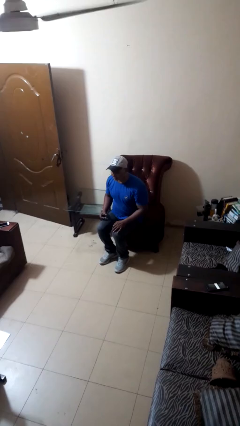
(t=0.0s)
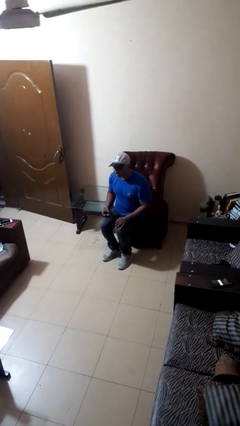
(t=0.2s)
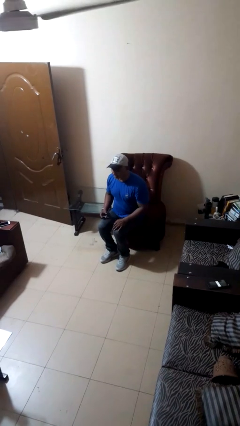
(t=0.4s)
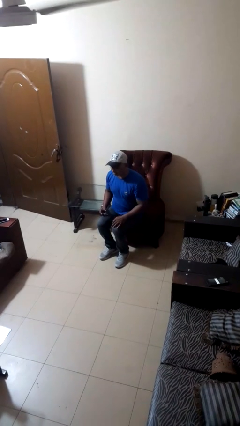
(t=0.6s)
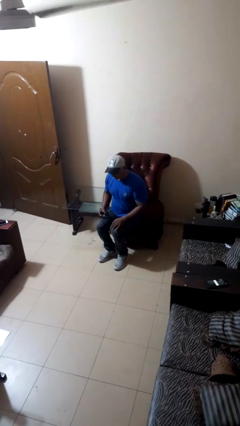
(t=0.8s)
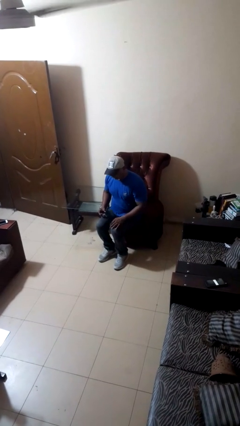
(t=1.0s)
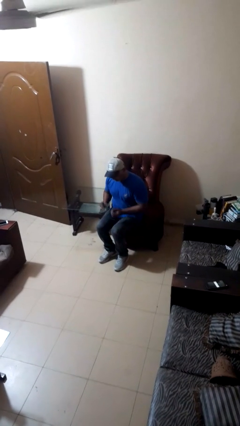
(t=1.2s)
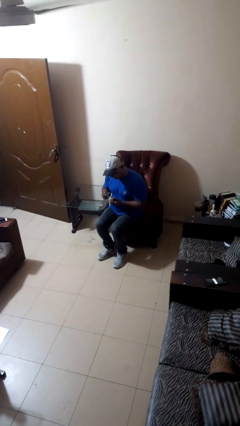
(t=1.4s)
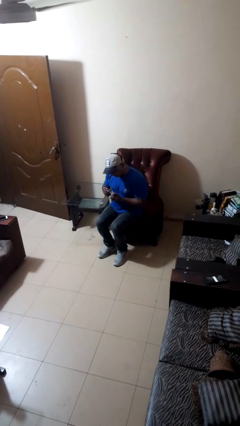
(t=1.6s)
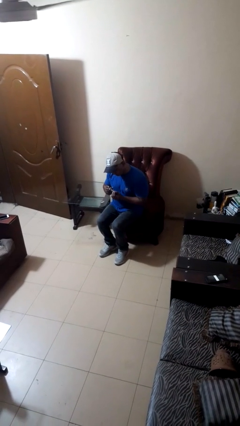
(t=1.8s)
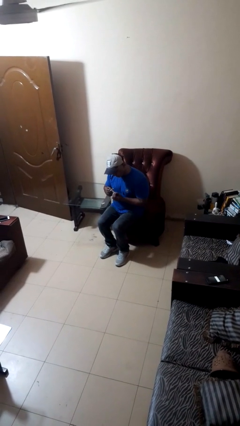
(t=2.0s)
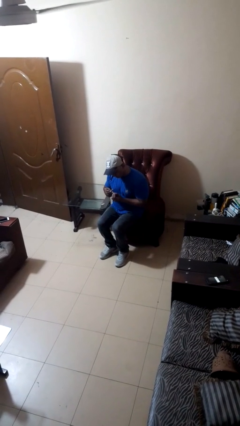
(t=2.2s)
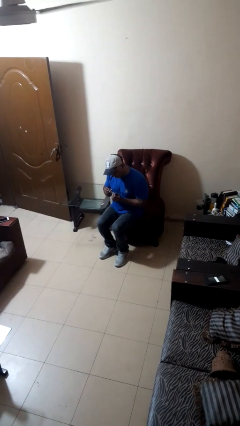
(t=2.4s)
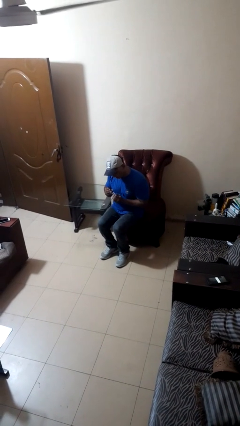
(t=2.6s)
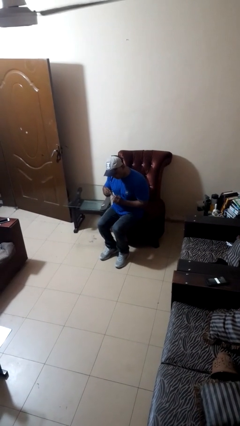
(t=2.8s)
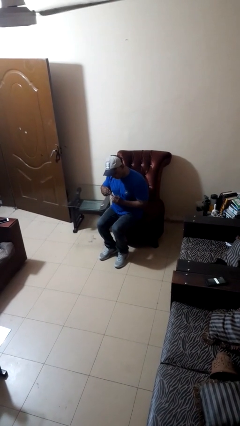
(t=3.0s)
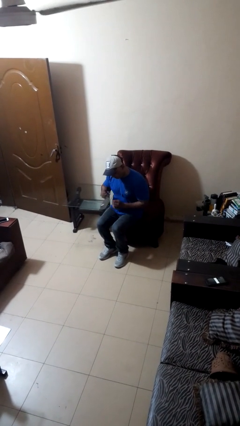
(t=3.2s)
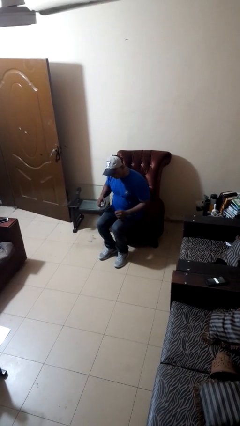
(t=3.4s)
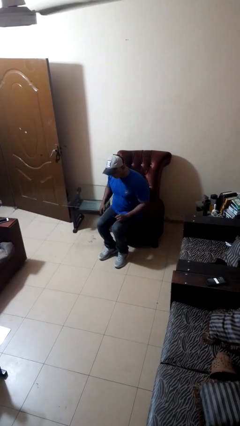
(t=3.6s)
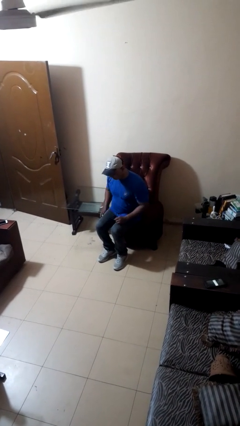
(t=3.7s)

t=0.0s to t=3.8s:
person clips fingernails

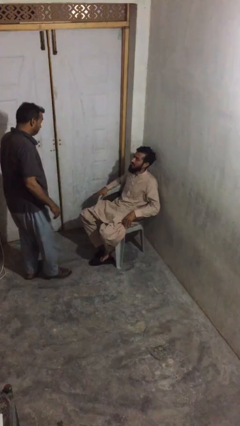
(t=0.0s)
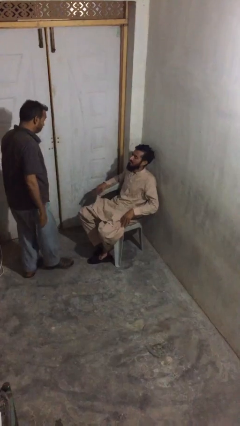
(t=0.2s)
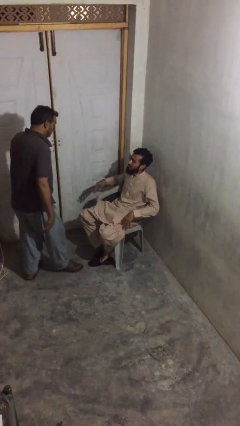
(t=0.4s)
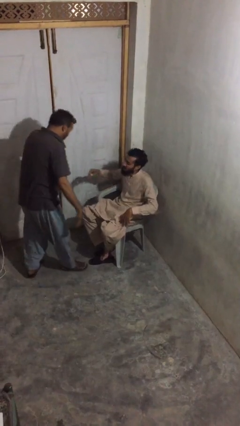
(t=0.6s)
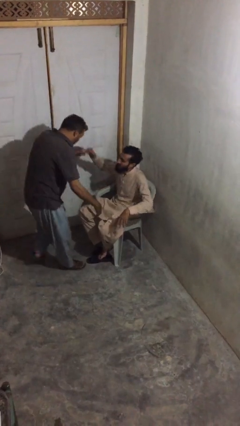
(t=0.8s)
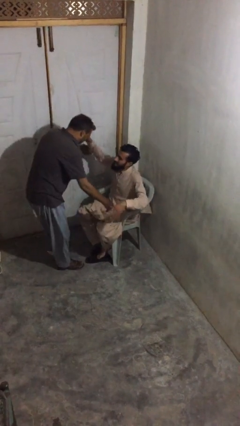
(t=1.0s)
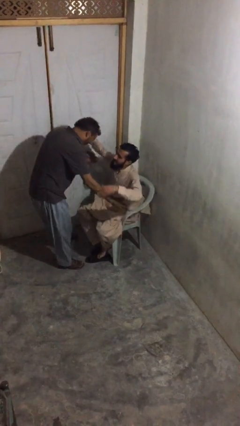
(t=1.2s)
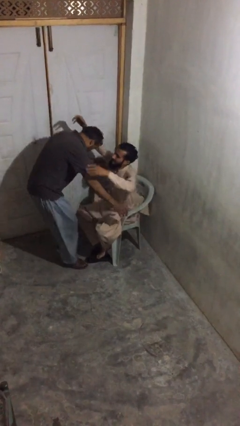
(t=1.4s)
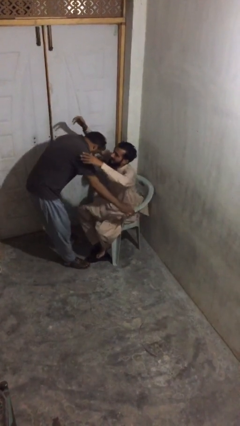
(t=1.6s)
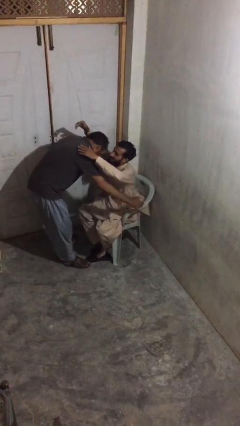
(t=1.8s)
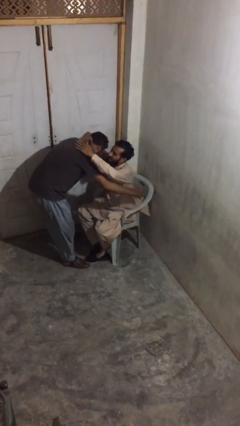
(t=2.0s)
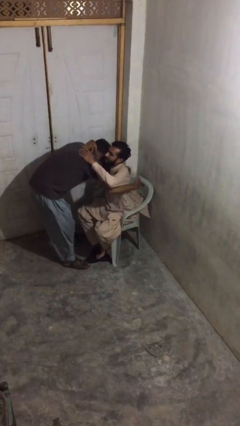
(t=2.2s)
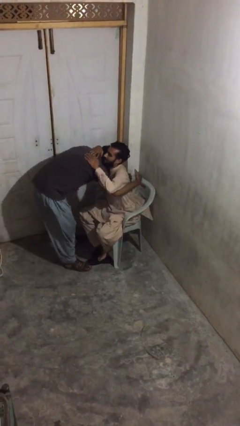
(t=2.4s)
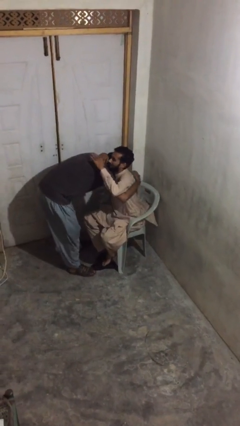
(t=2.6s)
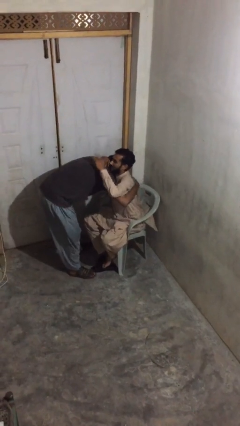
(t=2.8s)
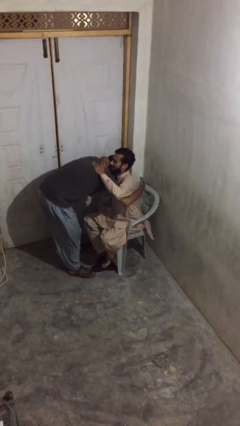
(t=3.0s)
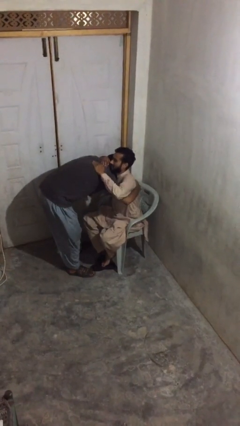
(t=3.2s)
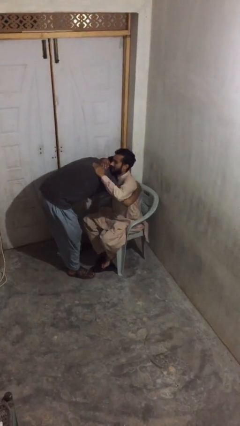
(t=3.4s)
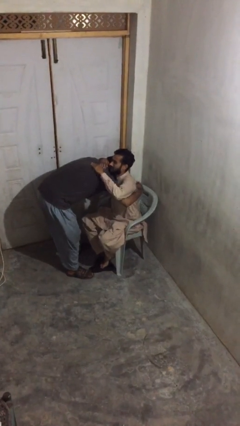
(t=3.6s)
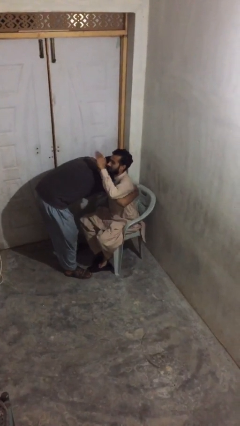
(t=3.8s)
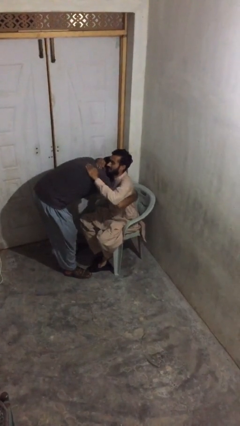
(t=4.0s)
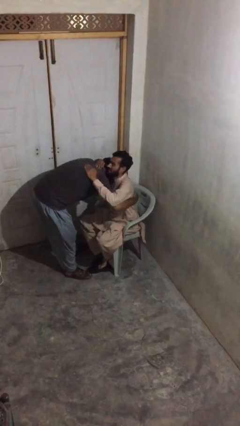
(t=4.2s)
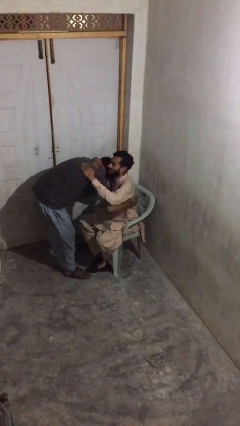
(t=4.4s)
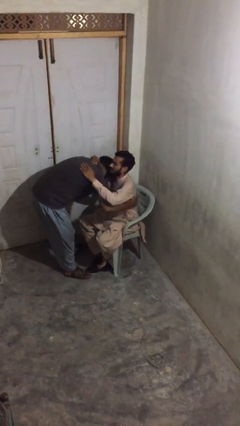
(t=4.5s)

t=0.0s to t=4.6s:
person embraces person

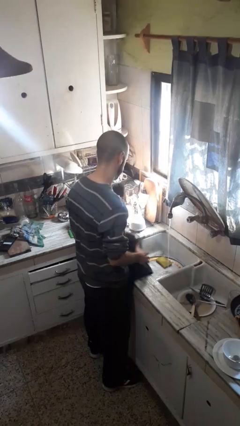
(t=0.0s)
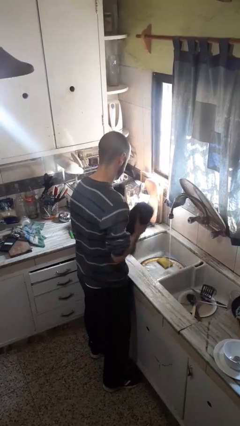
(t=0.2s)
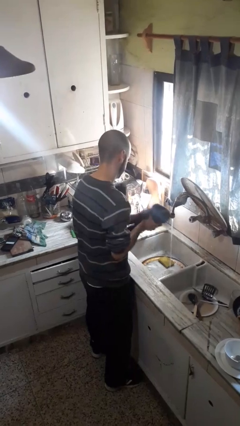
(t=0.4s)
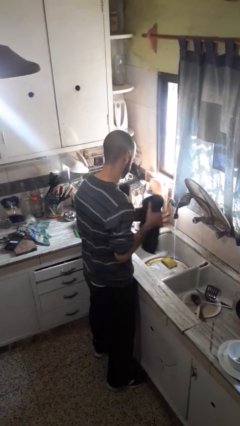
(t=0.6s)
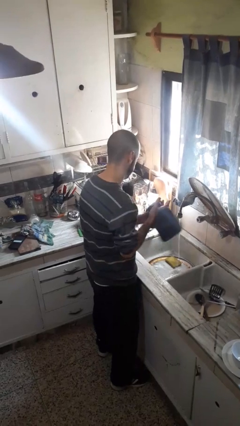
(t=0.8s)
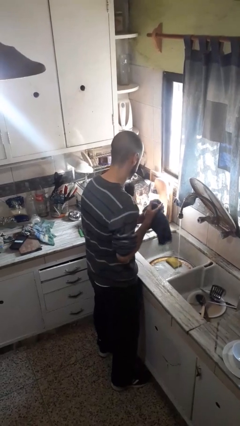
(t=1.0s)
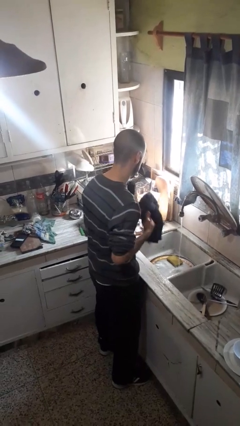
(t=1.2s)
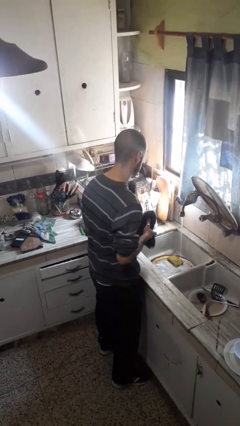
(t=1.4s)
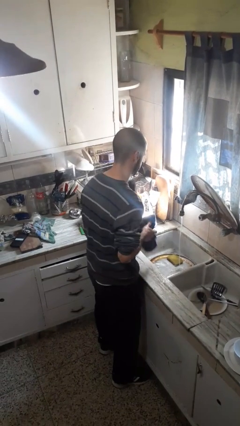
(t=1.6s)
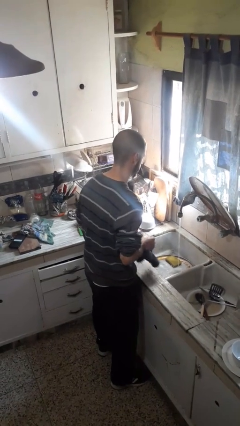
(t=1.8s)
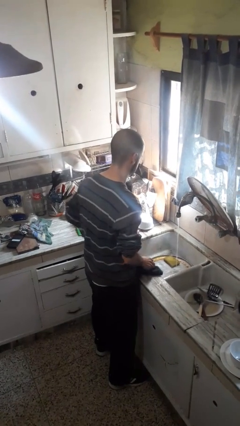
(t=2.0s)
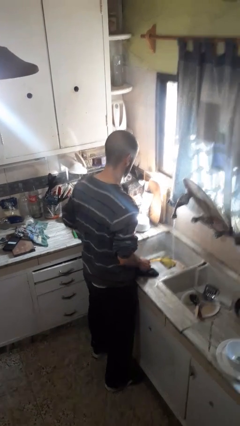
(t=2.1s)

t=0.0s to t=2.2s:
person dries hands with towel

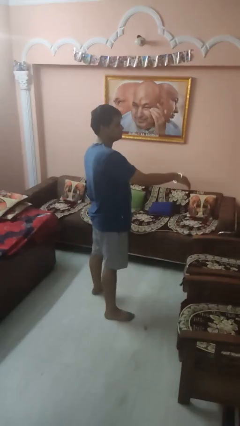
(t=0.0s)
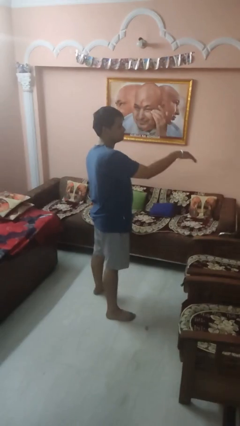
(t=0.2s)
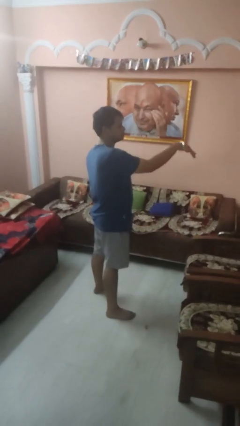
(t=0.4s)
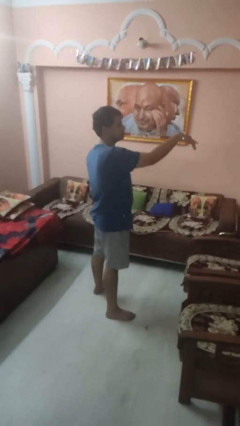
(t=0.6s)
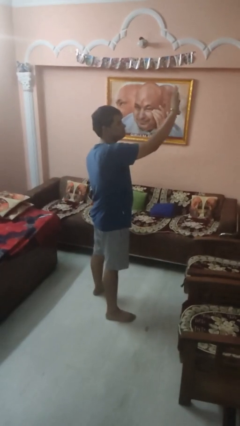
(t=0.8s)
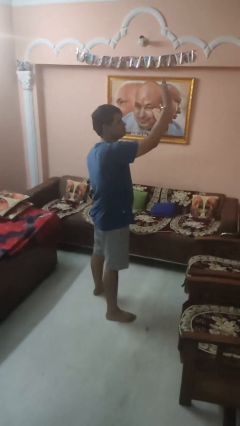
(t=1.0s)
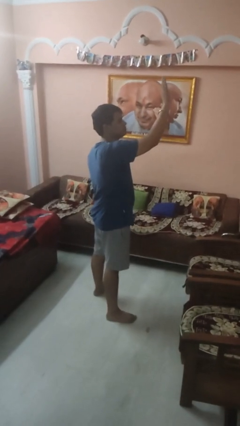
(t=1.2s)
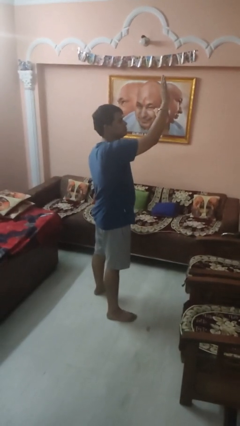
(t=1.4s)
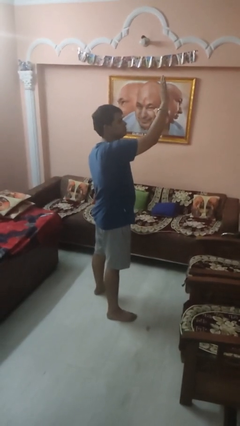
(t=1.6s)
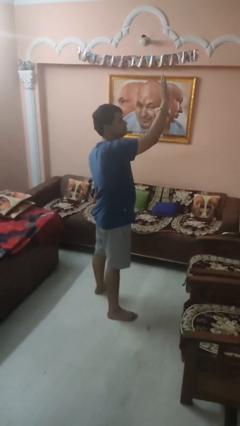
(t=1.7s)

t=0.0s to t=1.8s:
person gestures swipe up

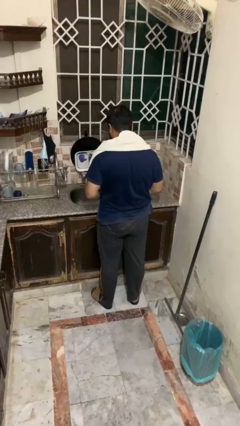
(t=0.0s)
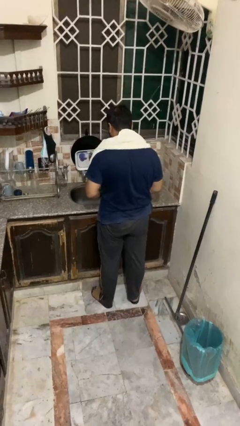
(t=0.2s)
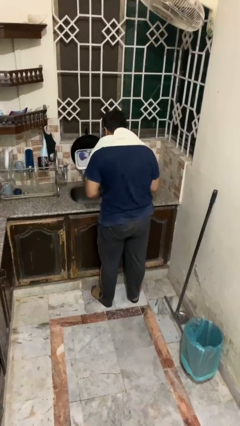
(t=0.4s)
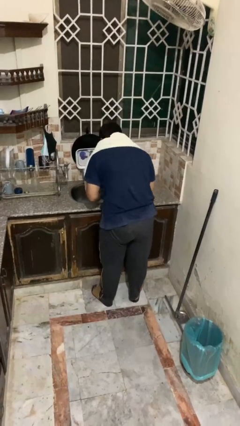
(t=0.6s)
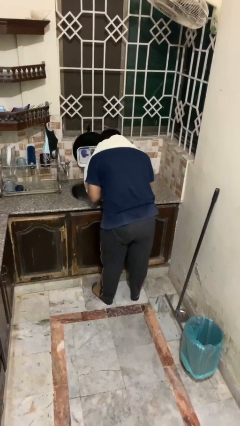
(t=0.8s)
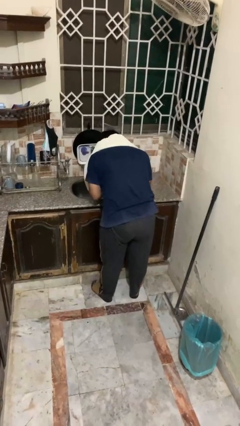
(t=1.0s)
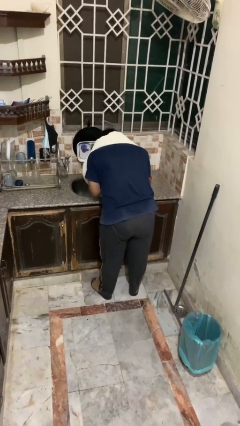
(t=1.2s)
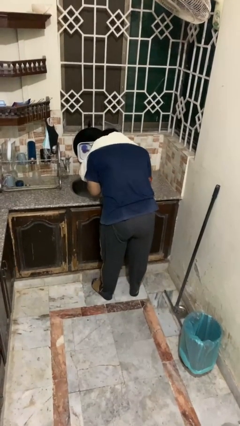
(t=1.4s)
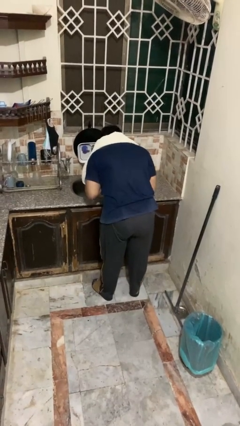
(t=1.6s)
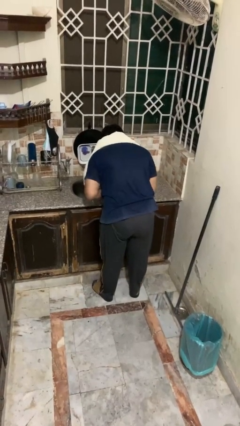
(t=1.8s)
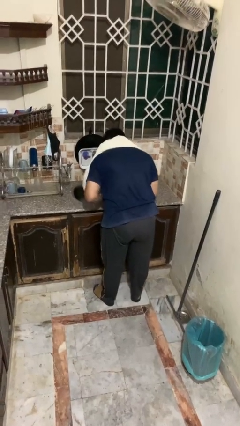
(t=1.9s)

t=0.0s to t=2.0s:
person washes face

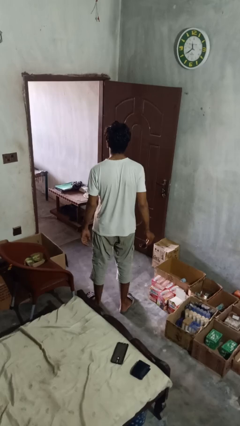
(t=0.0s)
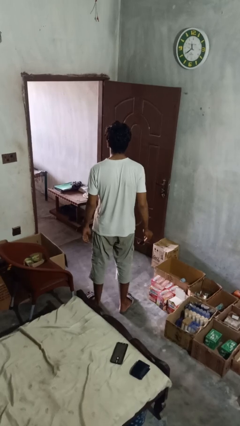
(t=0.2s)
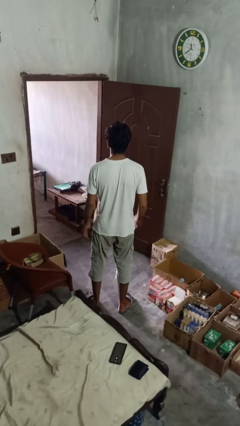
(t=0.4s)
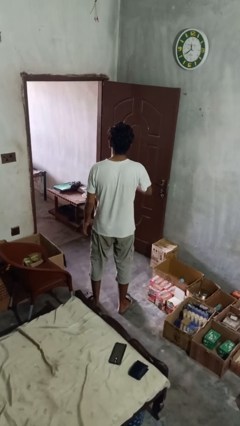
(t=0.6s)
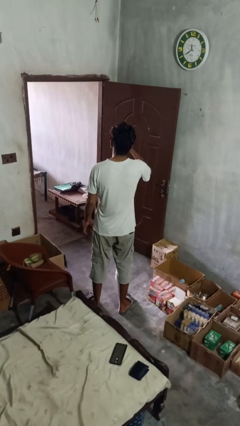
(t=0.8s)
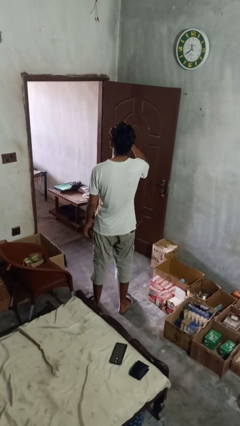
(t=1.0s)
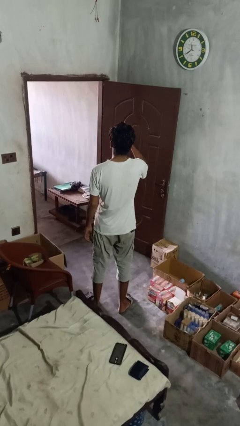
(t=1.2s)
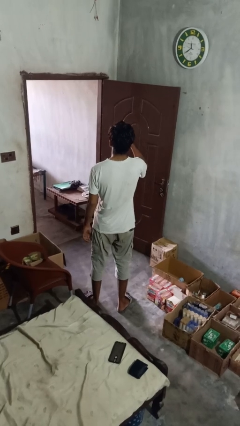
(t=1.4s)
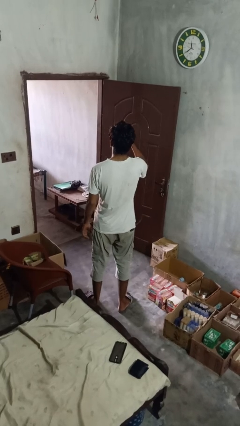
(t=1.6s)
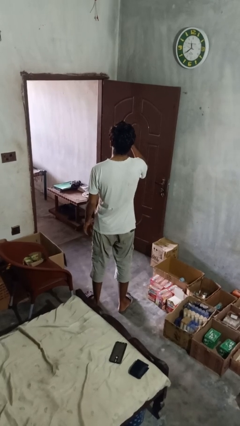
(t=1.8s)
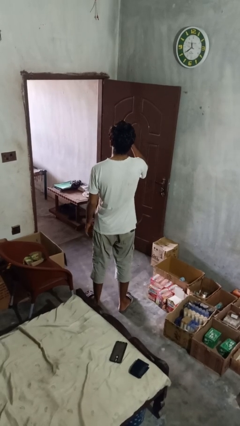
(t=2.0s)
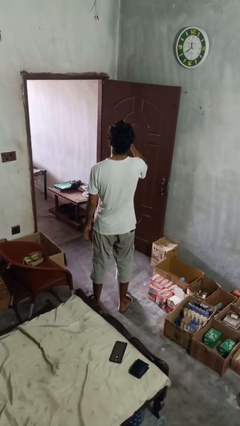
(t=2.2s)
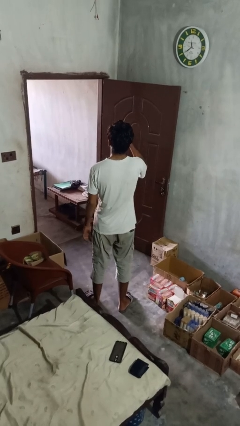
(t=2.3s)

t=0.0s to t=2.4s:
person puts on glasses

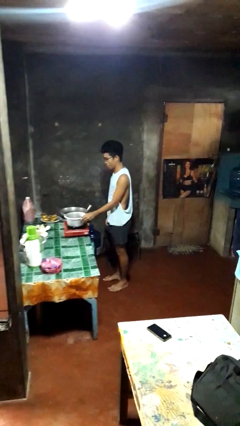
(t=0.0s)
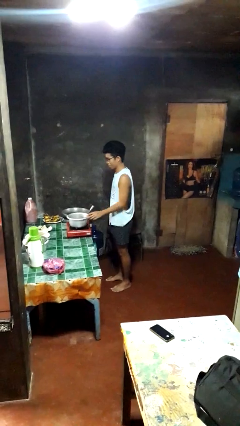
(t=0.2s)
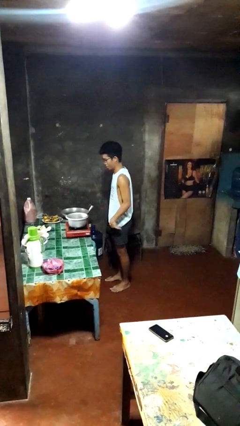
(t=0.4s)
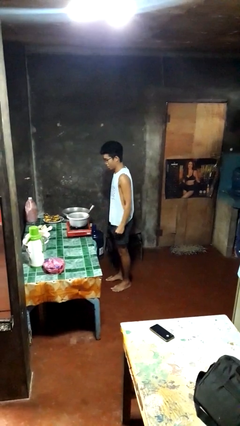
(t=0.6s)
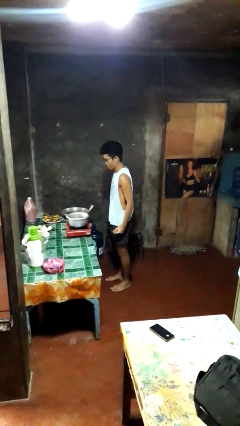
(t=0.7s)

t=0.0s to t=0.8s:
person burns hand
